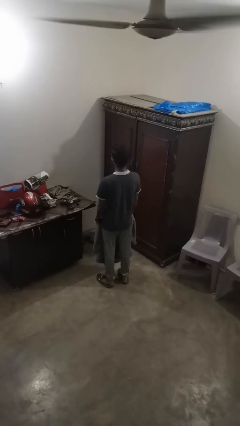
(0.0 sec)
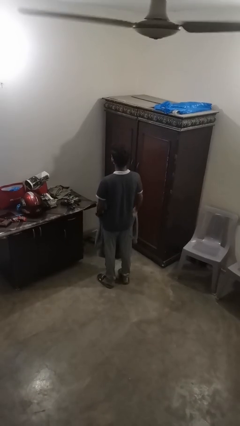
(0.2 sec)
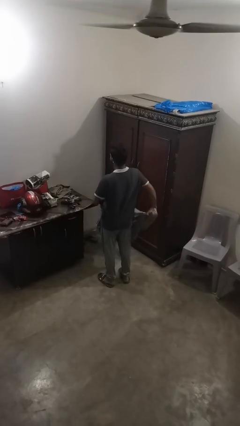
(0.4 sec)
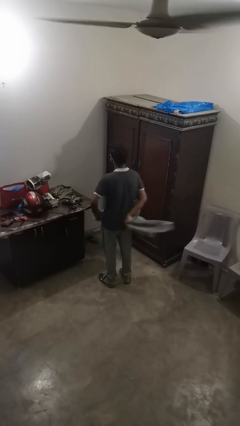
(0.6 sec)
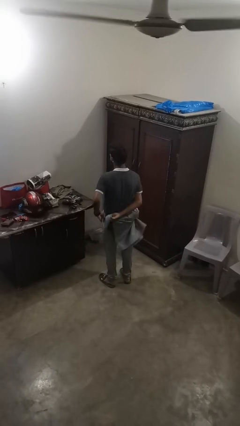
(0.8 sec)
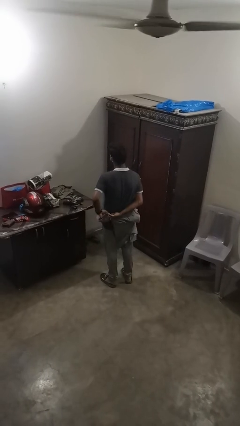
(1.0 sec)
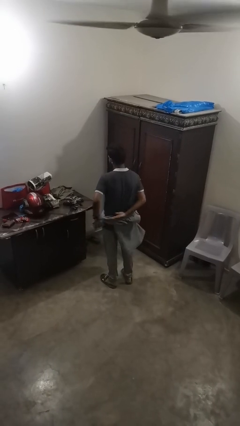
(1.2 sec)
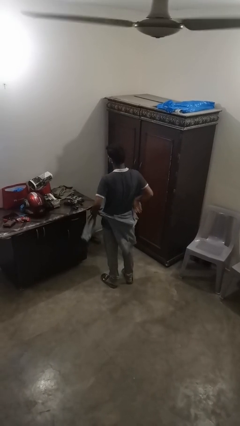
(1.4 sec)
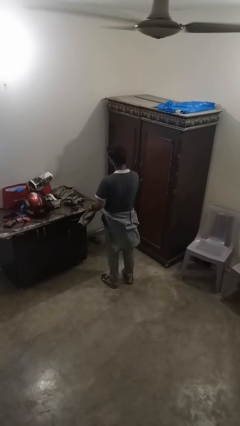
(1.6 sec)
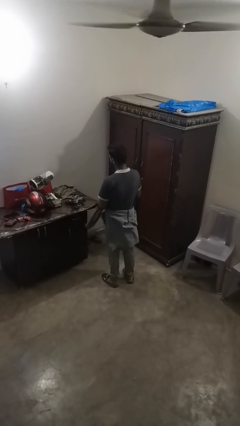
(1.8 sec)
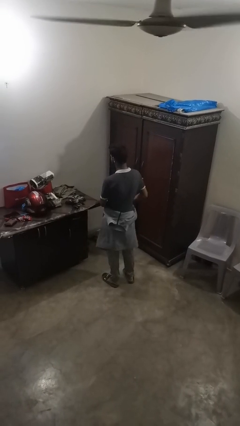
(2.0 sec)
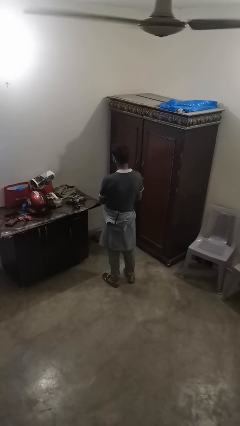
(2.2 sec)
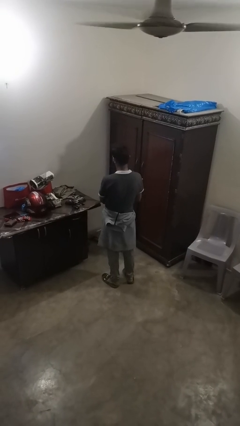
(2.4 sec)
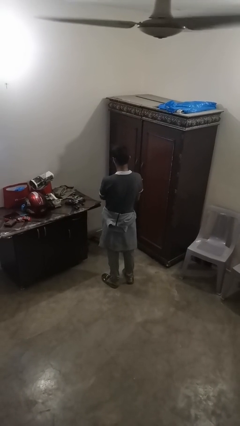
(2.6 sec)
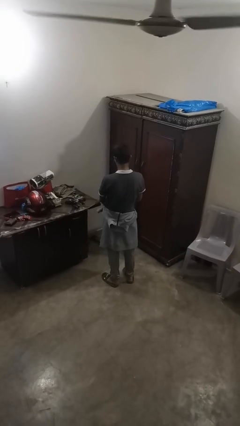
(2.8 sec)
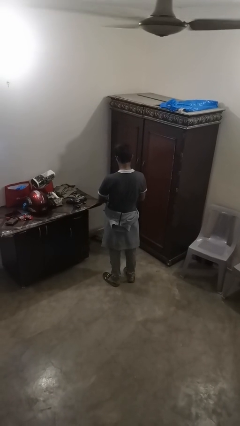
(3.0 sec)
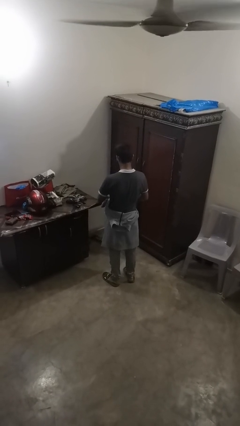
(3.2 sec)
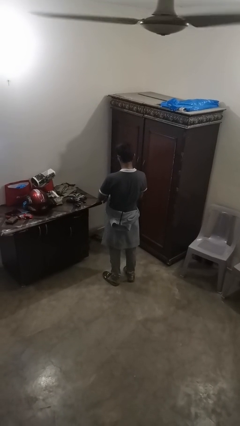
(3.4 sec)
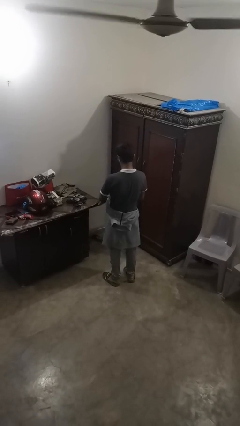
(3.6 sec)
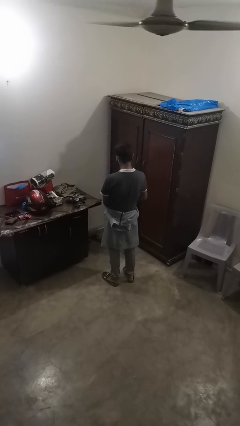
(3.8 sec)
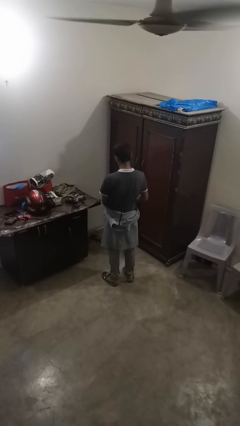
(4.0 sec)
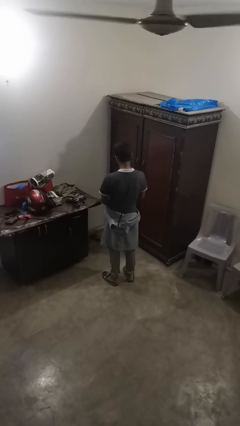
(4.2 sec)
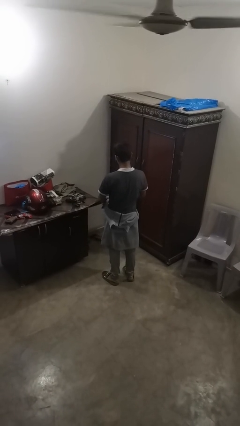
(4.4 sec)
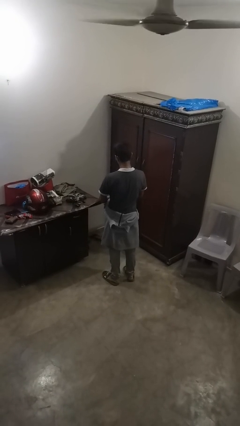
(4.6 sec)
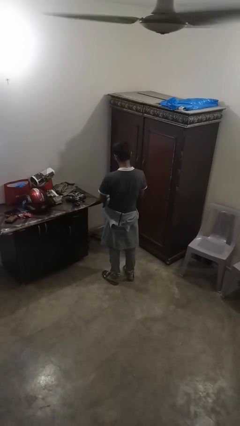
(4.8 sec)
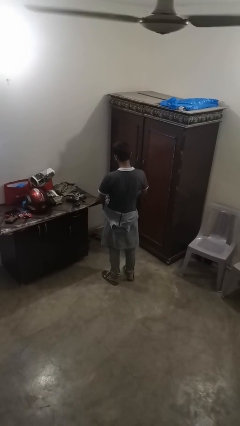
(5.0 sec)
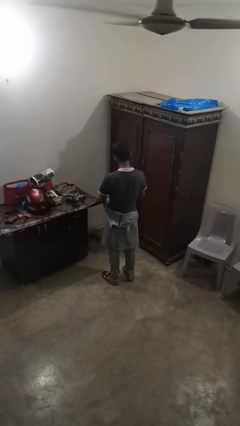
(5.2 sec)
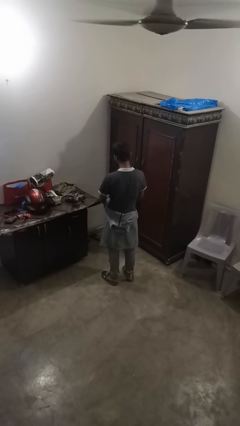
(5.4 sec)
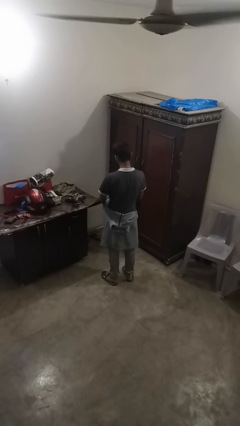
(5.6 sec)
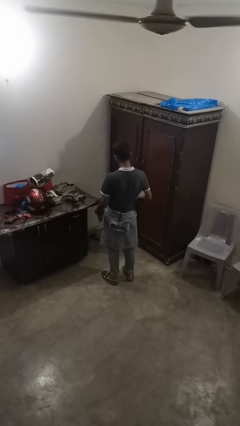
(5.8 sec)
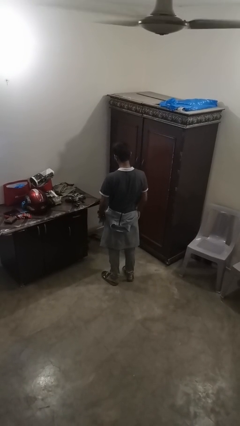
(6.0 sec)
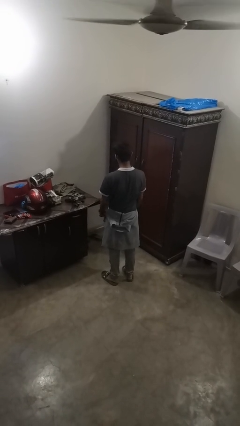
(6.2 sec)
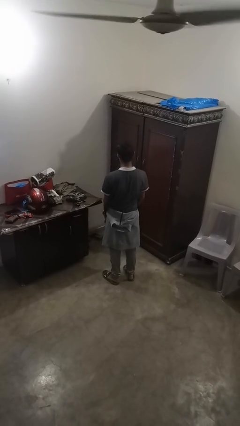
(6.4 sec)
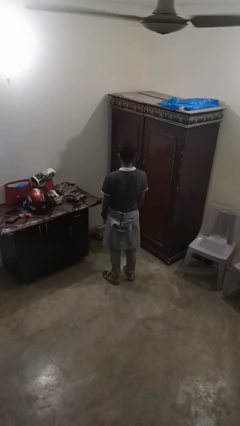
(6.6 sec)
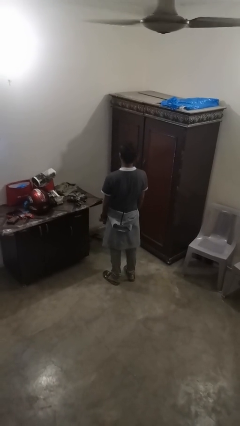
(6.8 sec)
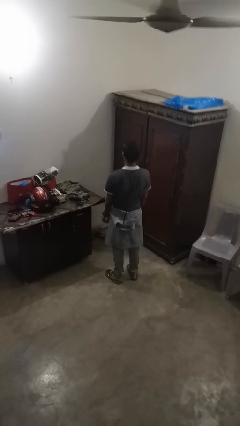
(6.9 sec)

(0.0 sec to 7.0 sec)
person ties jacket around waist

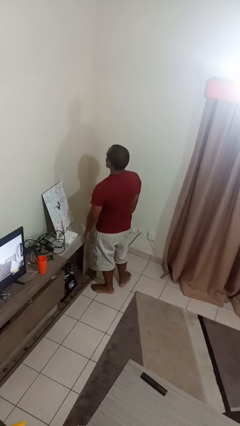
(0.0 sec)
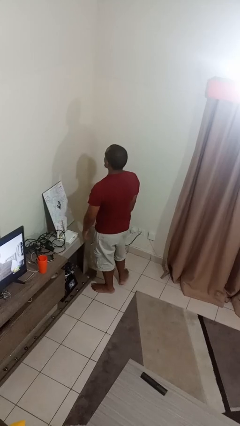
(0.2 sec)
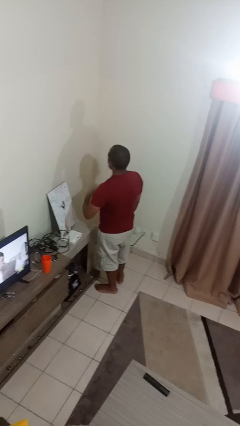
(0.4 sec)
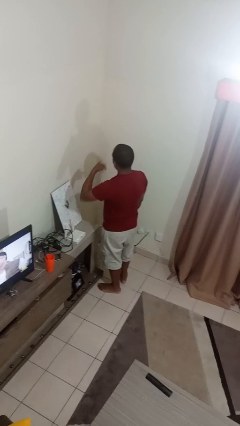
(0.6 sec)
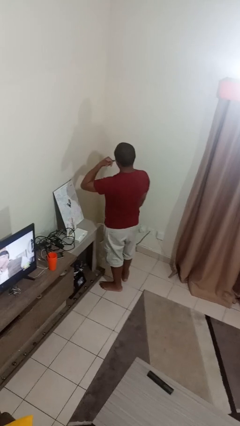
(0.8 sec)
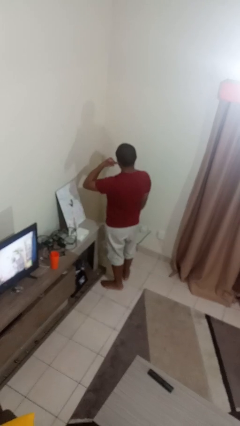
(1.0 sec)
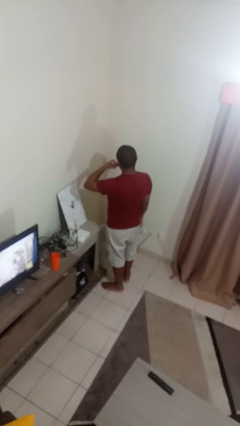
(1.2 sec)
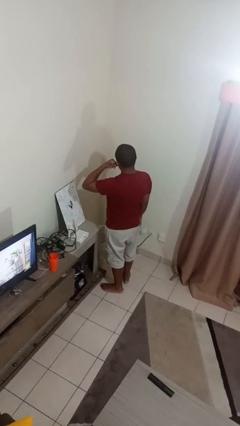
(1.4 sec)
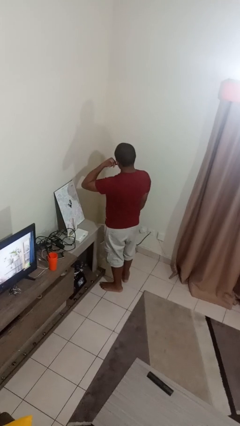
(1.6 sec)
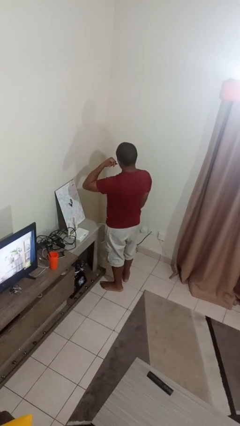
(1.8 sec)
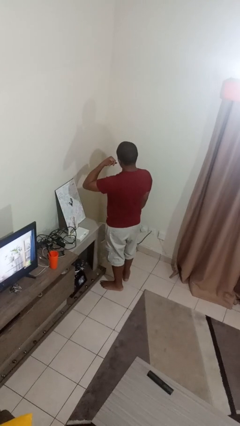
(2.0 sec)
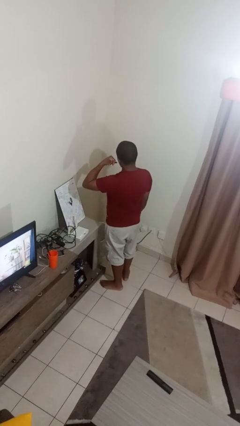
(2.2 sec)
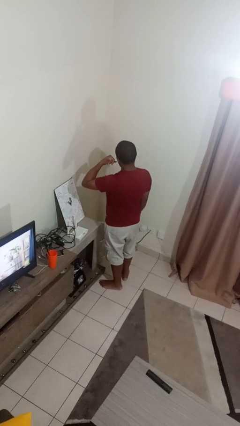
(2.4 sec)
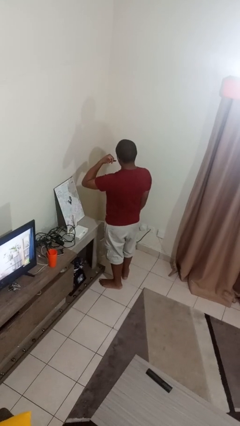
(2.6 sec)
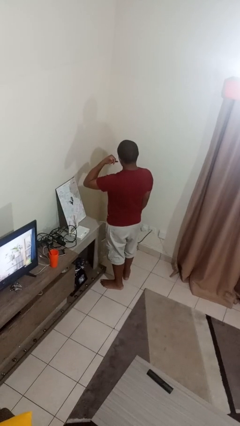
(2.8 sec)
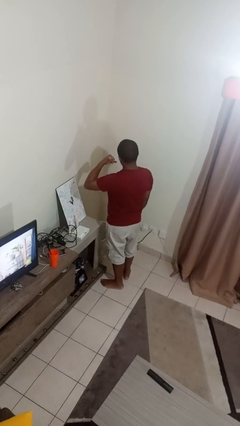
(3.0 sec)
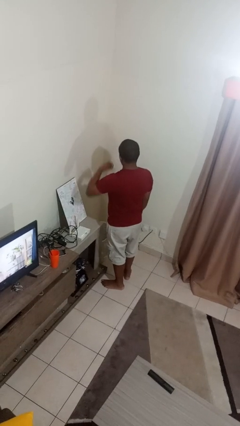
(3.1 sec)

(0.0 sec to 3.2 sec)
person gestures call me

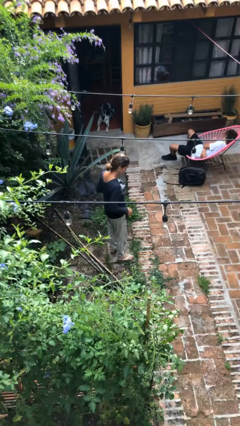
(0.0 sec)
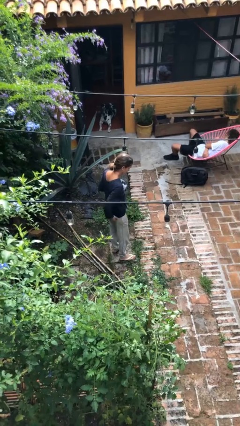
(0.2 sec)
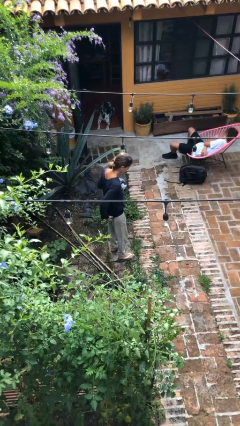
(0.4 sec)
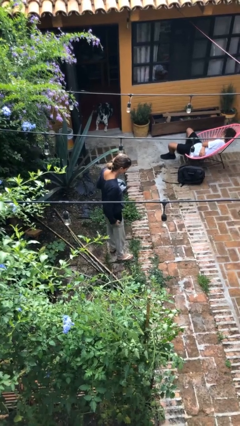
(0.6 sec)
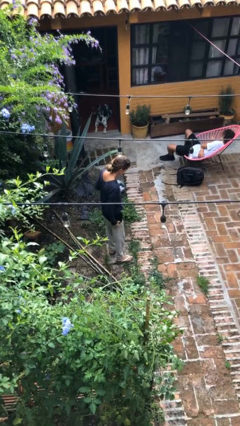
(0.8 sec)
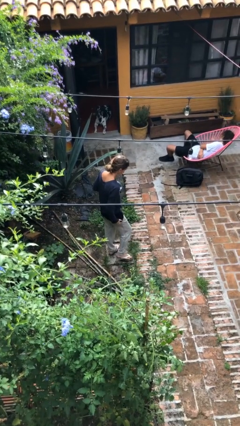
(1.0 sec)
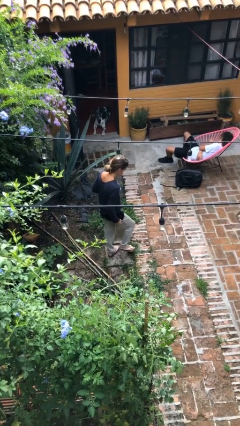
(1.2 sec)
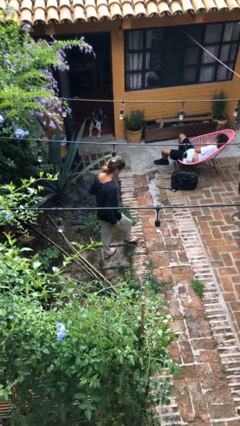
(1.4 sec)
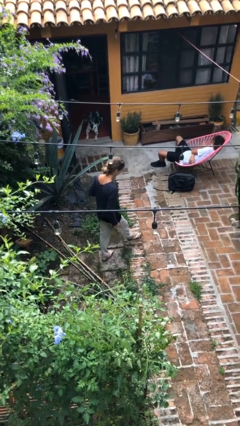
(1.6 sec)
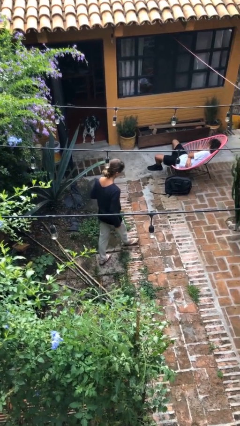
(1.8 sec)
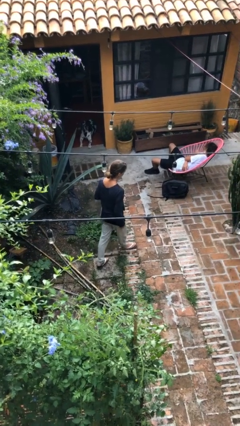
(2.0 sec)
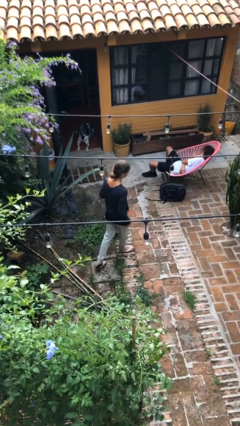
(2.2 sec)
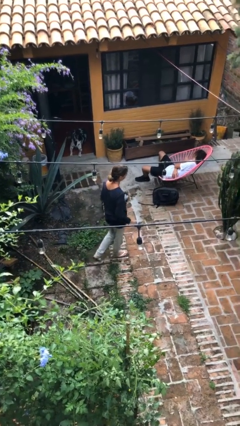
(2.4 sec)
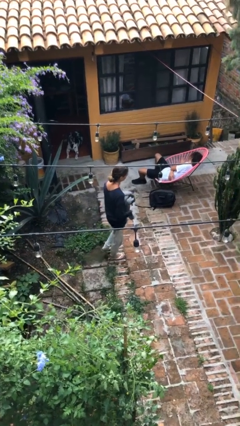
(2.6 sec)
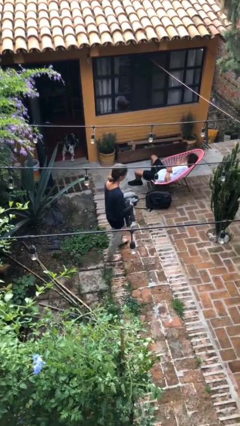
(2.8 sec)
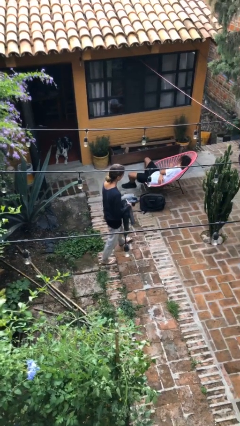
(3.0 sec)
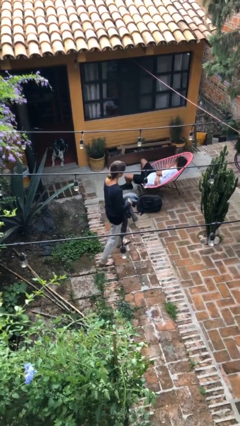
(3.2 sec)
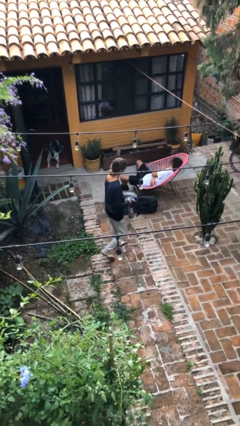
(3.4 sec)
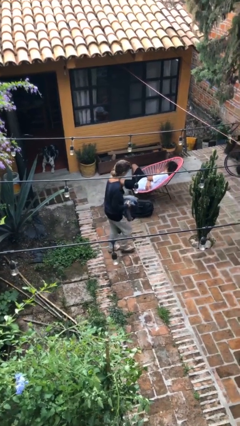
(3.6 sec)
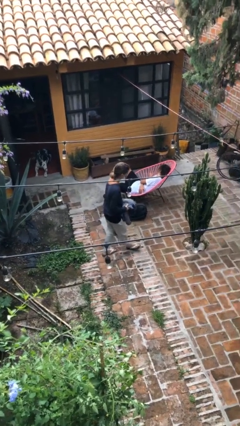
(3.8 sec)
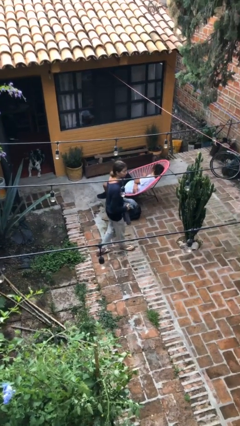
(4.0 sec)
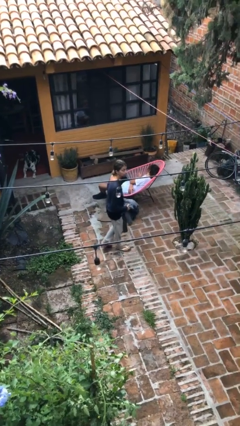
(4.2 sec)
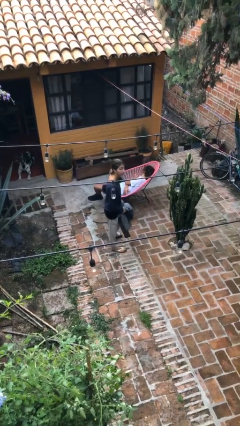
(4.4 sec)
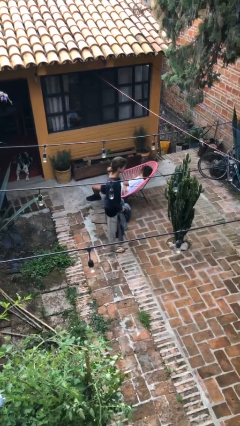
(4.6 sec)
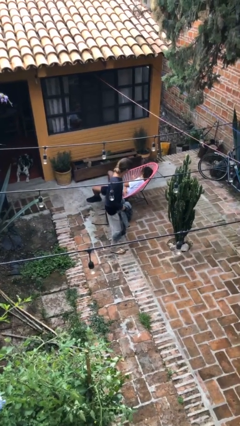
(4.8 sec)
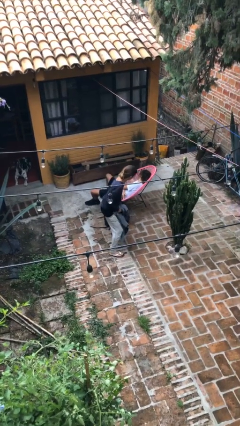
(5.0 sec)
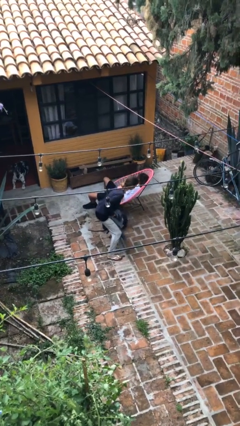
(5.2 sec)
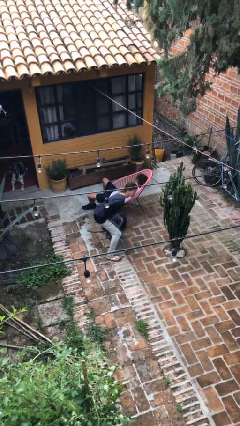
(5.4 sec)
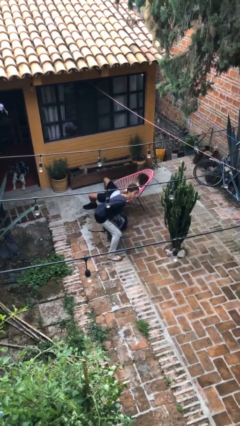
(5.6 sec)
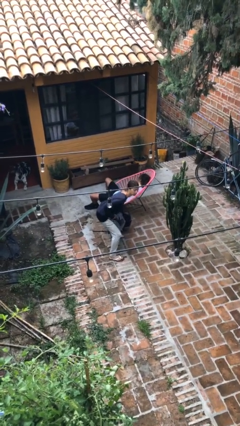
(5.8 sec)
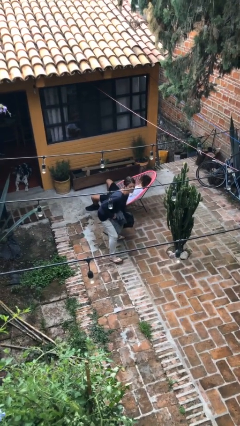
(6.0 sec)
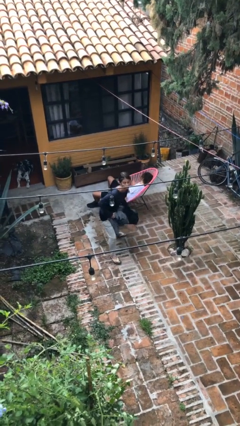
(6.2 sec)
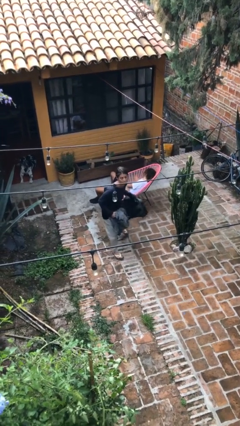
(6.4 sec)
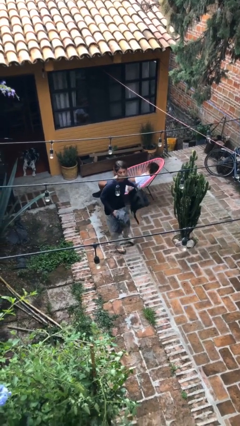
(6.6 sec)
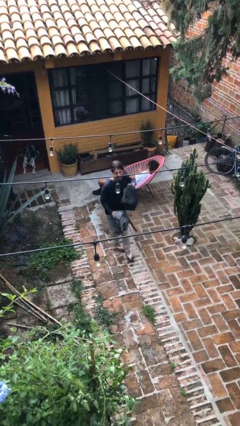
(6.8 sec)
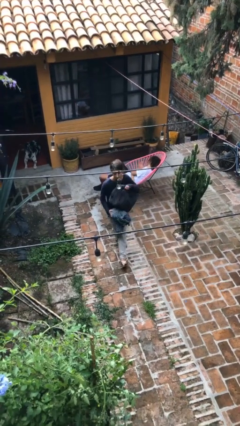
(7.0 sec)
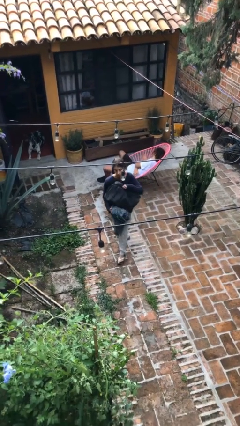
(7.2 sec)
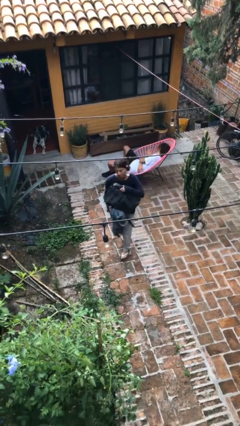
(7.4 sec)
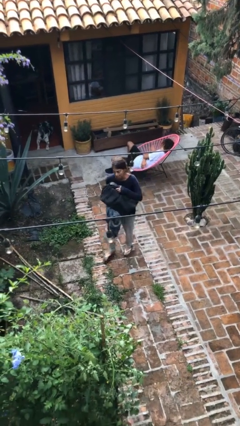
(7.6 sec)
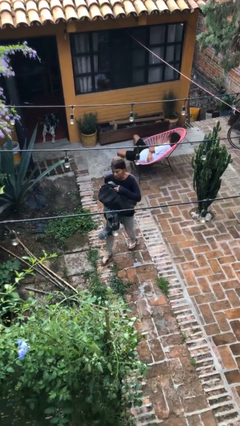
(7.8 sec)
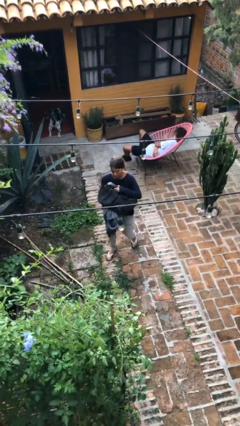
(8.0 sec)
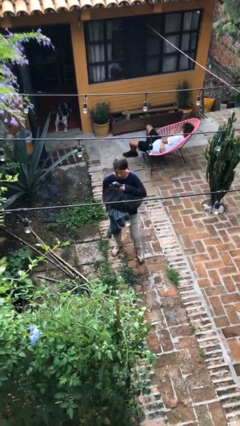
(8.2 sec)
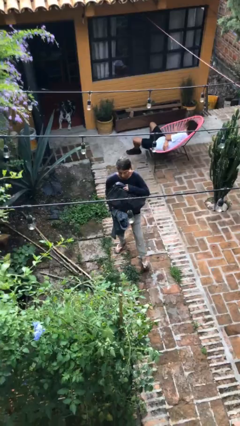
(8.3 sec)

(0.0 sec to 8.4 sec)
person steals object from person
